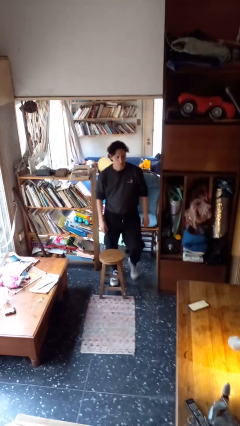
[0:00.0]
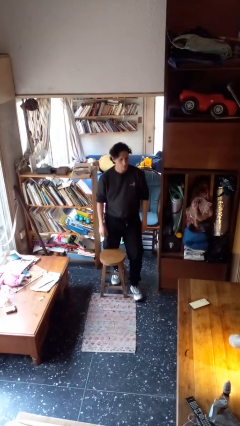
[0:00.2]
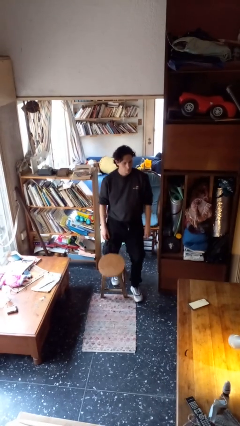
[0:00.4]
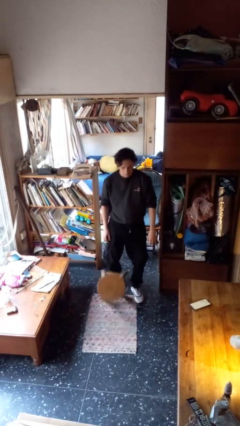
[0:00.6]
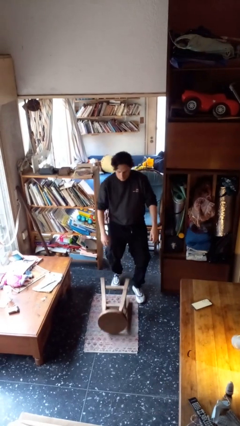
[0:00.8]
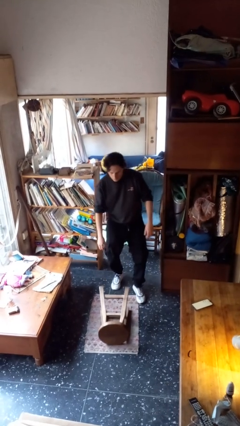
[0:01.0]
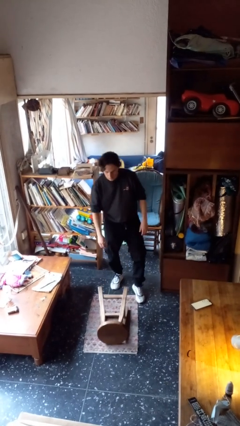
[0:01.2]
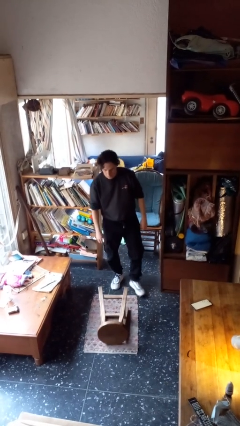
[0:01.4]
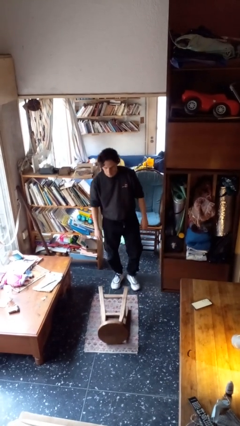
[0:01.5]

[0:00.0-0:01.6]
person knocks over furniture

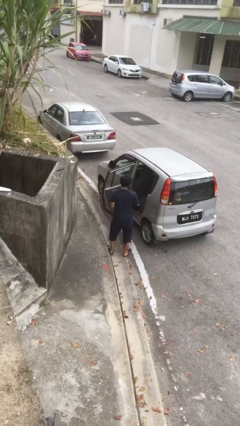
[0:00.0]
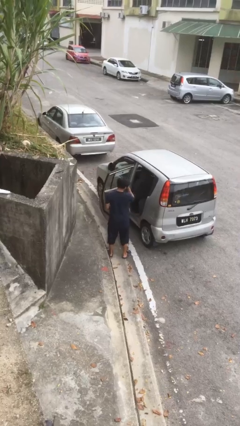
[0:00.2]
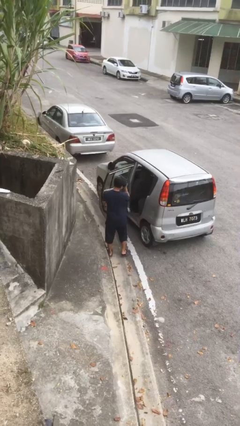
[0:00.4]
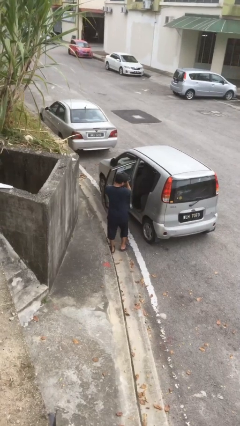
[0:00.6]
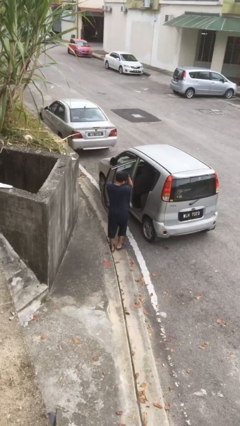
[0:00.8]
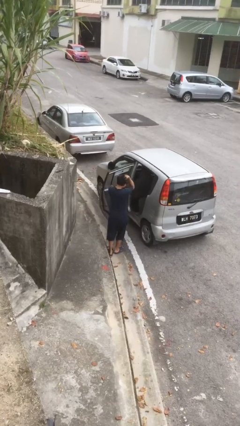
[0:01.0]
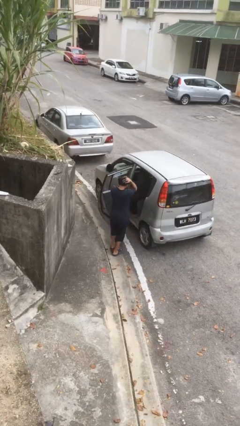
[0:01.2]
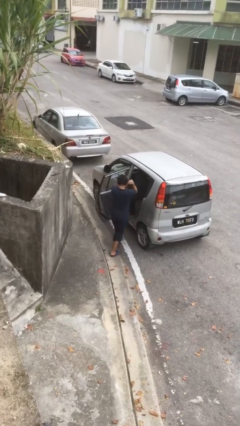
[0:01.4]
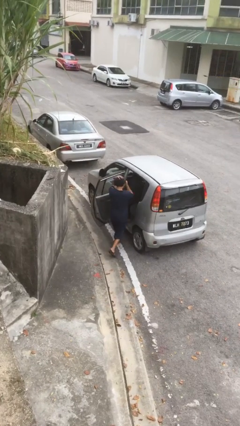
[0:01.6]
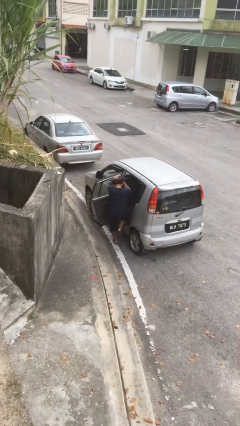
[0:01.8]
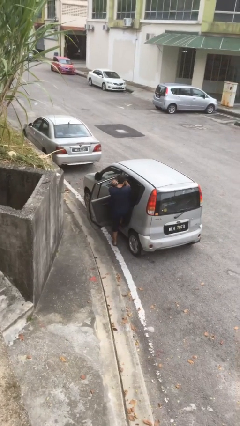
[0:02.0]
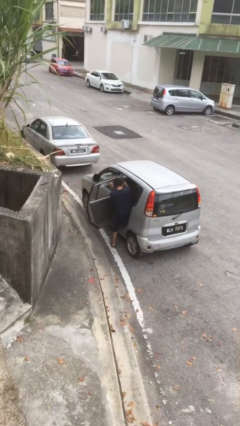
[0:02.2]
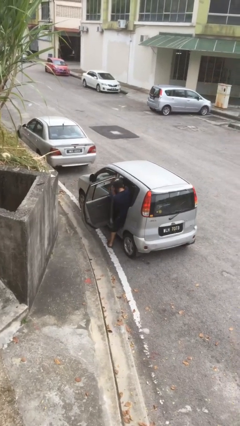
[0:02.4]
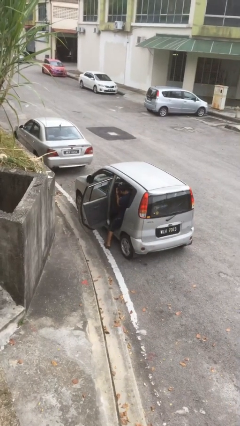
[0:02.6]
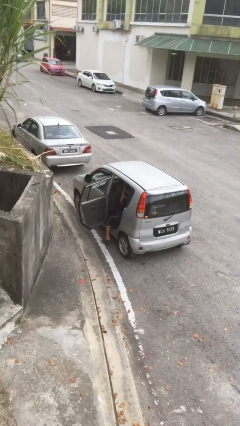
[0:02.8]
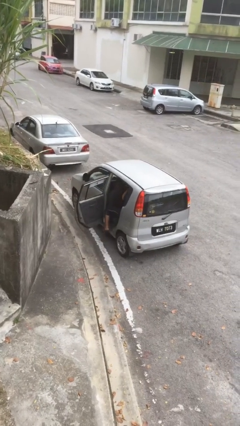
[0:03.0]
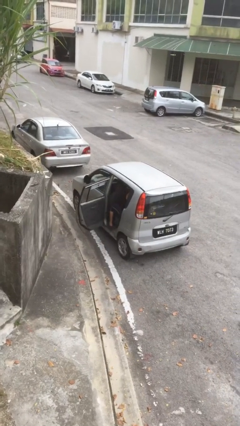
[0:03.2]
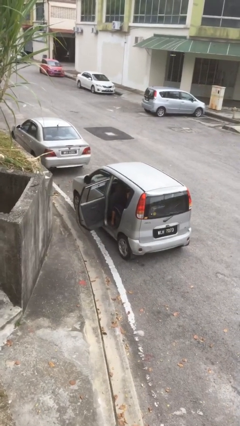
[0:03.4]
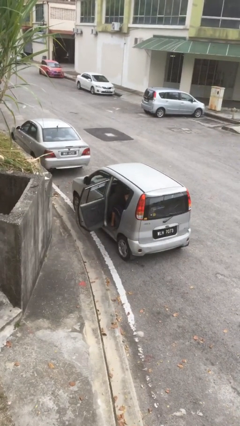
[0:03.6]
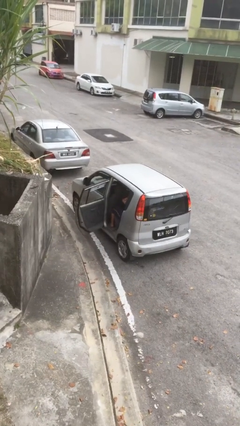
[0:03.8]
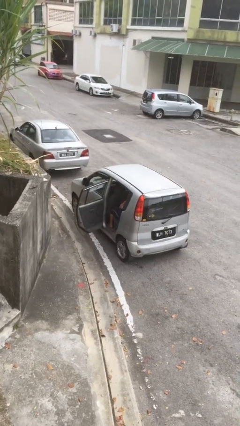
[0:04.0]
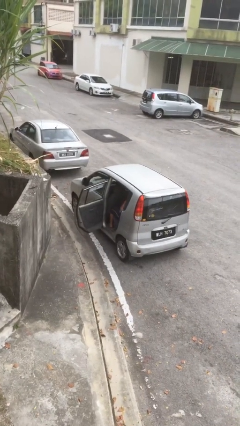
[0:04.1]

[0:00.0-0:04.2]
person enters car

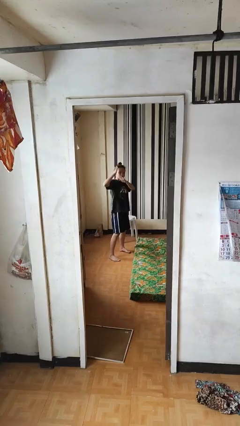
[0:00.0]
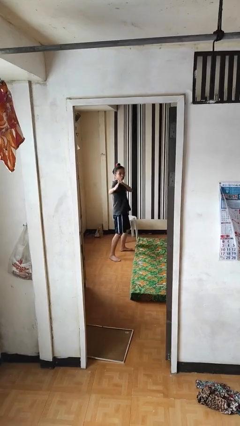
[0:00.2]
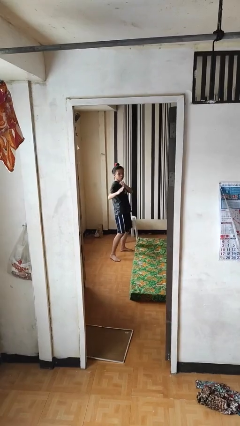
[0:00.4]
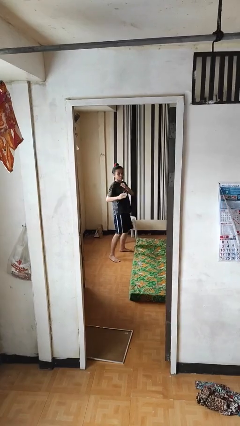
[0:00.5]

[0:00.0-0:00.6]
person karate chop

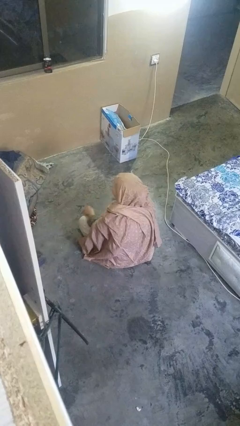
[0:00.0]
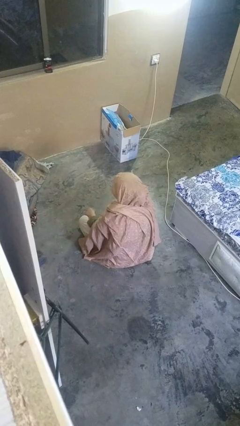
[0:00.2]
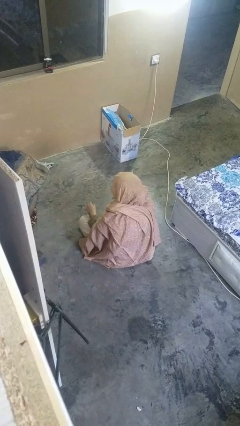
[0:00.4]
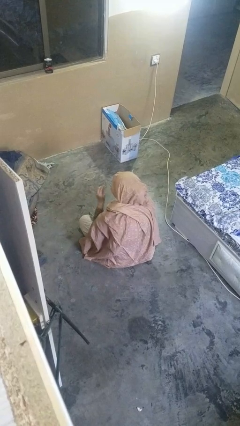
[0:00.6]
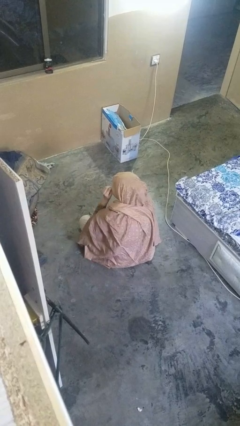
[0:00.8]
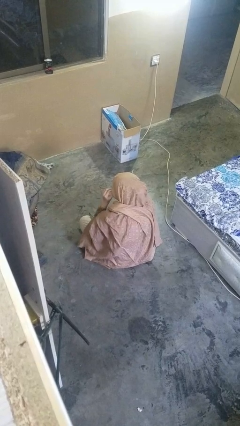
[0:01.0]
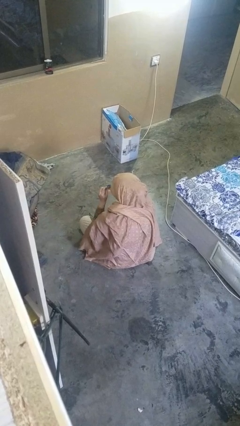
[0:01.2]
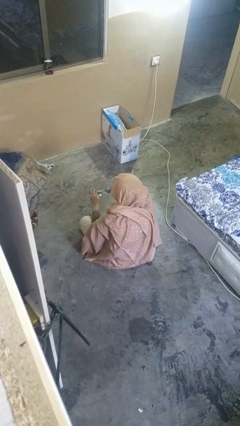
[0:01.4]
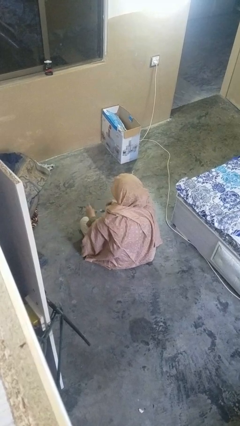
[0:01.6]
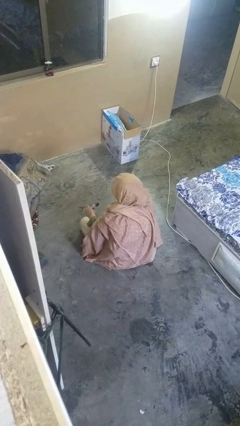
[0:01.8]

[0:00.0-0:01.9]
person takes off glasses

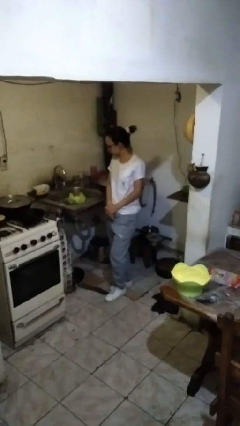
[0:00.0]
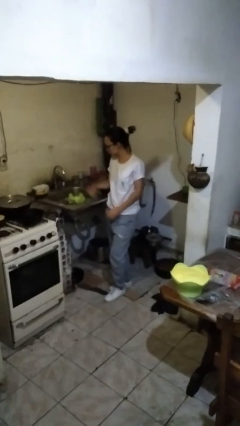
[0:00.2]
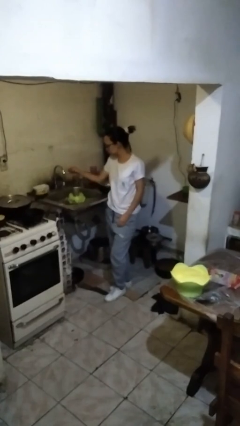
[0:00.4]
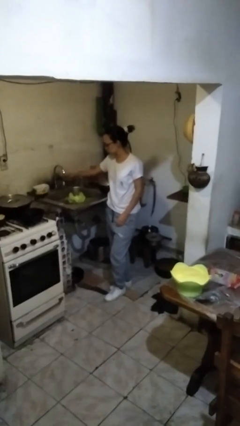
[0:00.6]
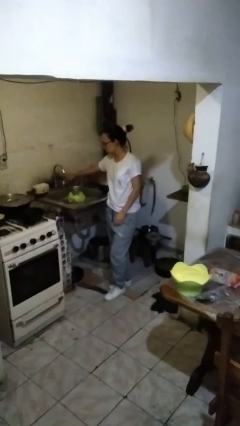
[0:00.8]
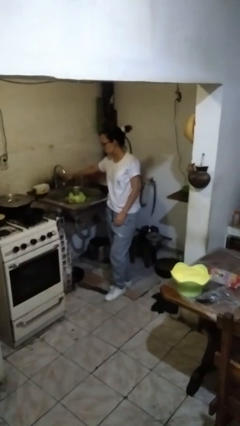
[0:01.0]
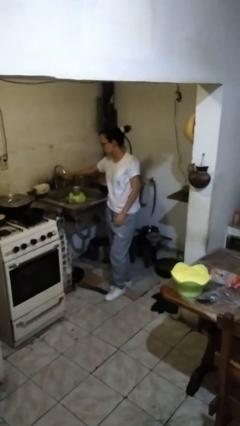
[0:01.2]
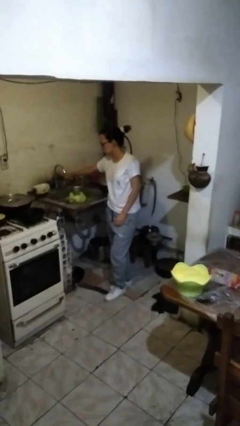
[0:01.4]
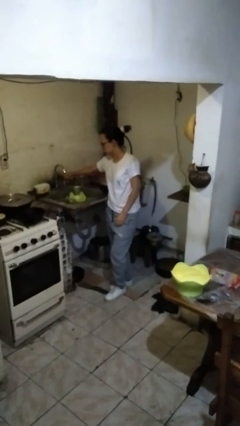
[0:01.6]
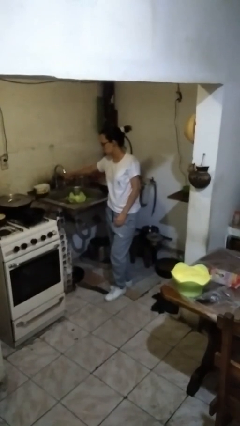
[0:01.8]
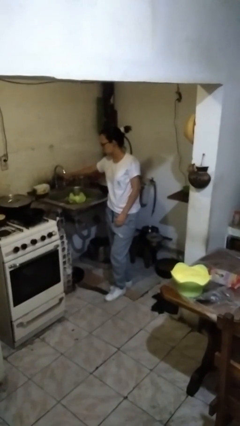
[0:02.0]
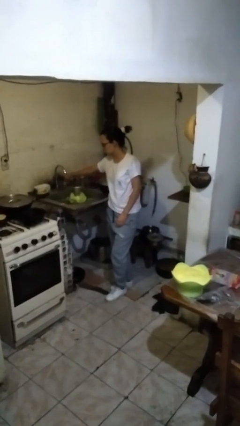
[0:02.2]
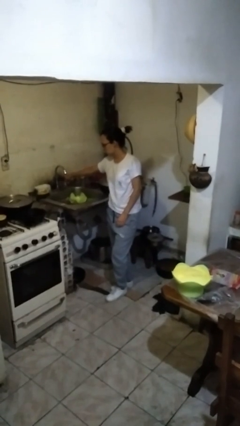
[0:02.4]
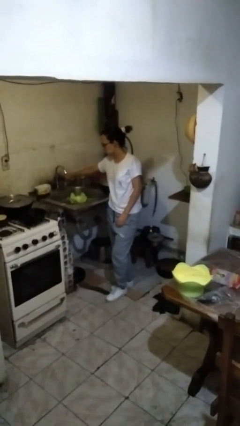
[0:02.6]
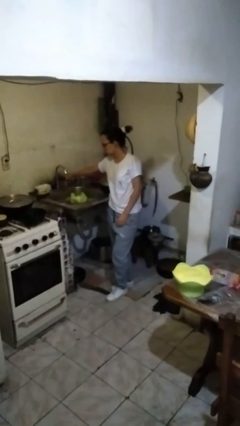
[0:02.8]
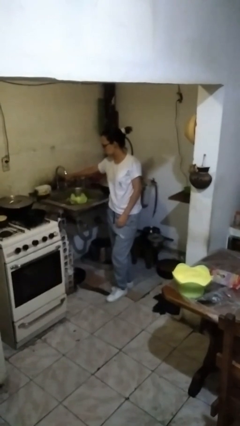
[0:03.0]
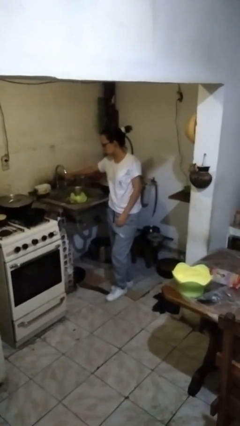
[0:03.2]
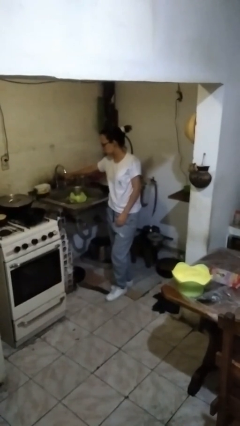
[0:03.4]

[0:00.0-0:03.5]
person turns on faucet

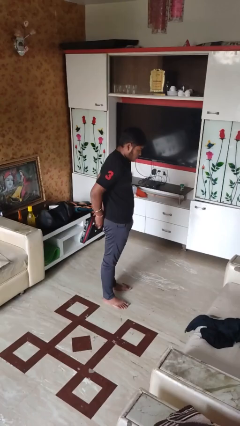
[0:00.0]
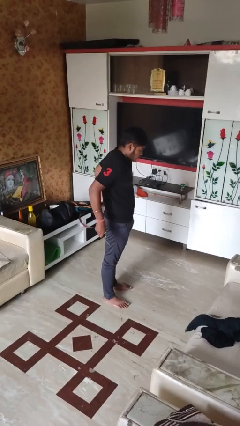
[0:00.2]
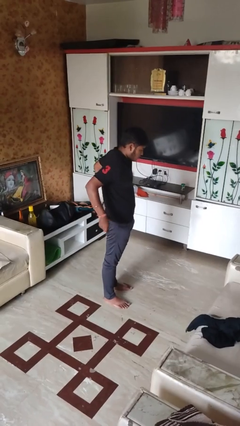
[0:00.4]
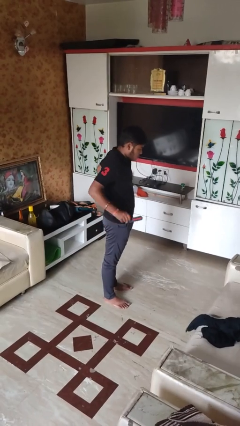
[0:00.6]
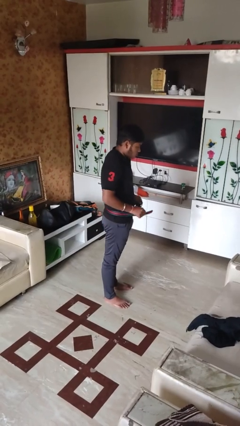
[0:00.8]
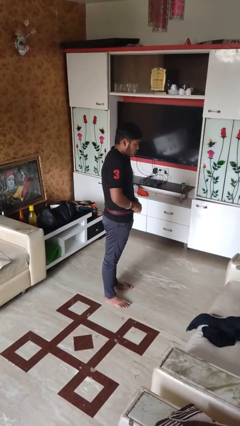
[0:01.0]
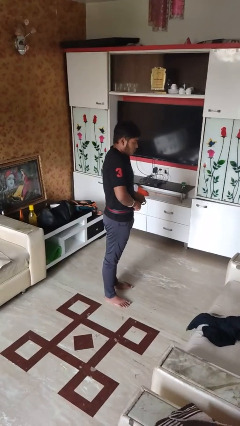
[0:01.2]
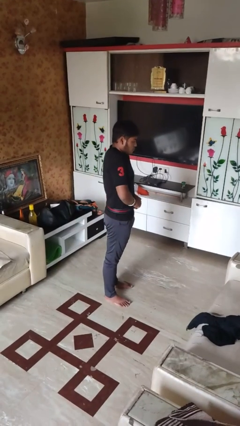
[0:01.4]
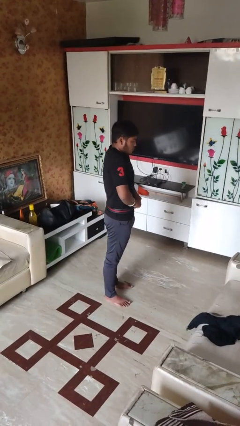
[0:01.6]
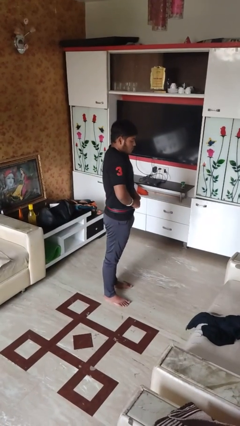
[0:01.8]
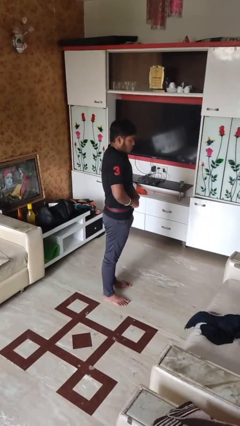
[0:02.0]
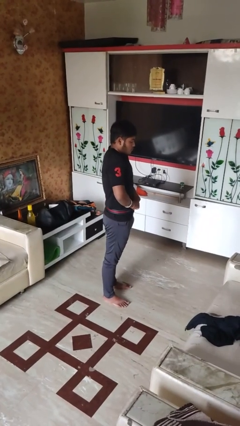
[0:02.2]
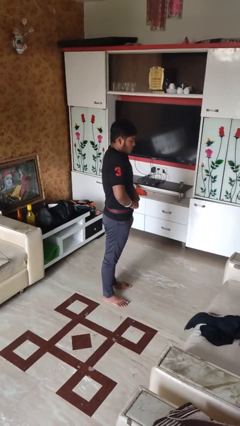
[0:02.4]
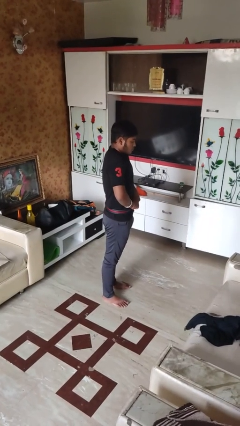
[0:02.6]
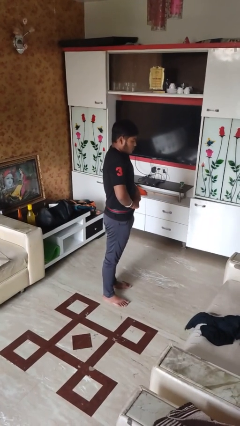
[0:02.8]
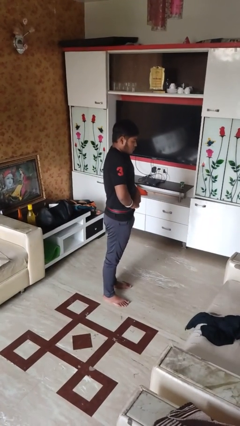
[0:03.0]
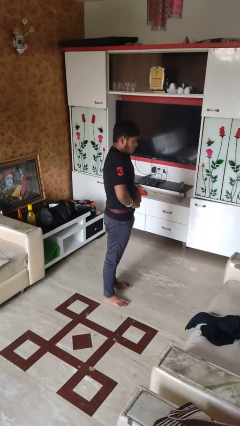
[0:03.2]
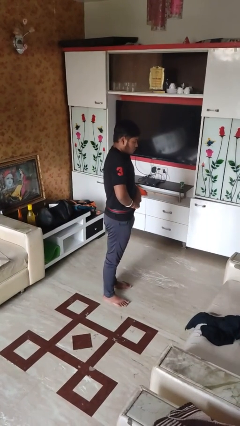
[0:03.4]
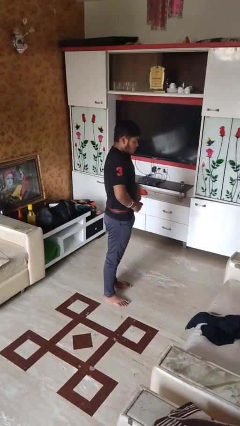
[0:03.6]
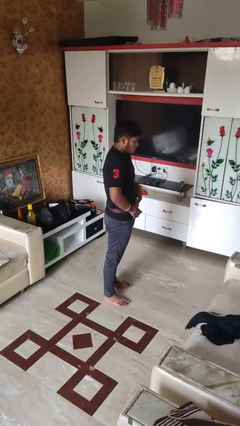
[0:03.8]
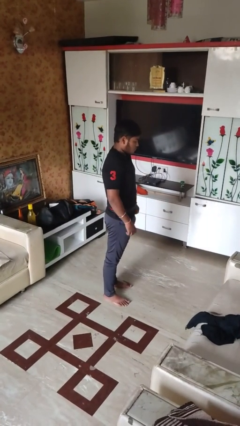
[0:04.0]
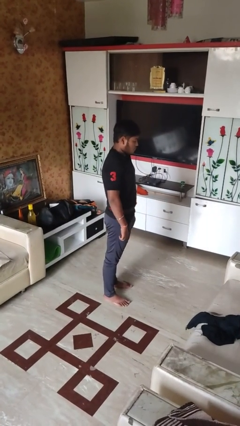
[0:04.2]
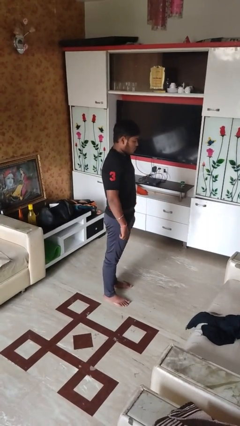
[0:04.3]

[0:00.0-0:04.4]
person puts on belt

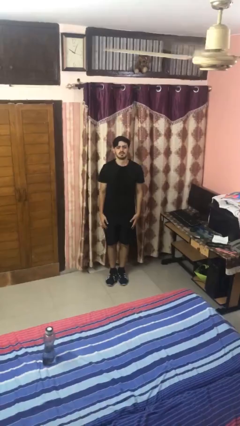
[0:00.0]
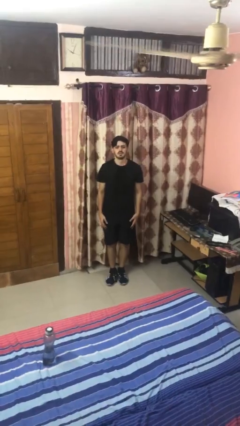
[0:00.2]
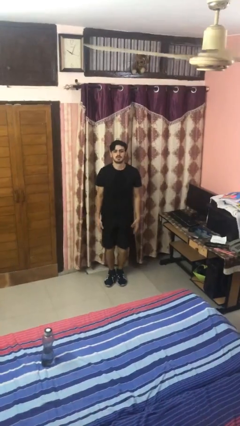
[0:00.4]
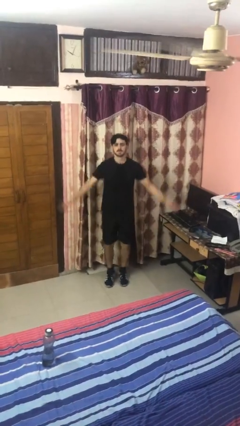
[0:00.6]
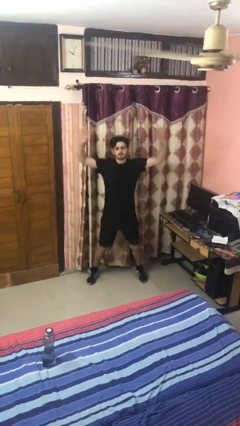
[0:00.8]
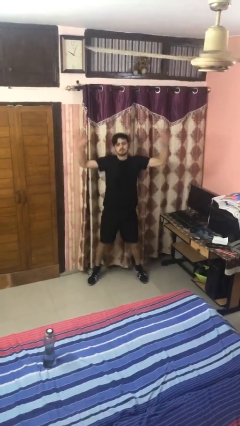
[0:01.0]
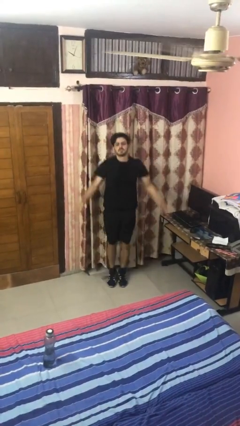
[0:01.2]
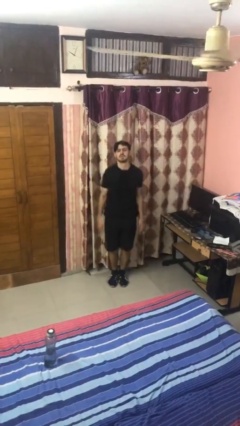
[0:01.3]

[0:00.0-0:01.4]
person exercises with jumping jacks
